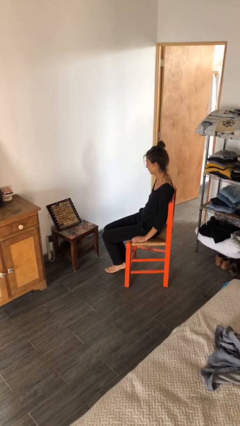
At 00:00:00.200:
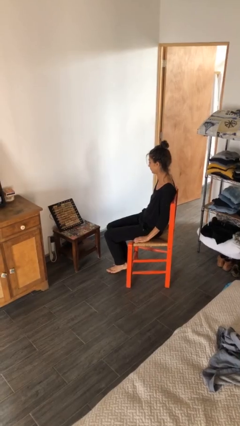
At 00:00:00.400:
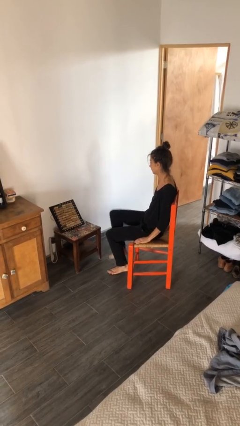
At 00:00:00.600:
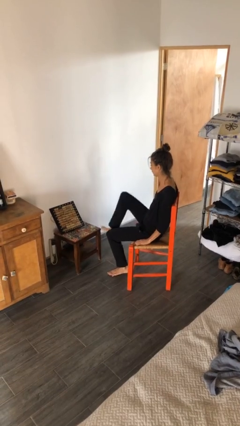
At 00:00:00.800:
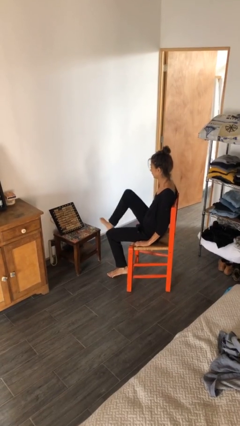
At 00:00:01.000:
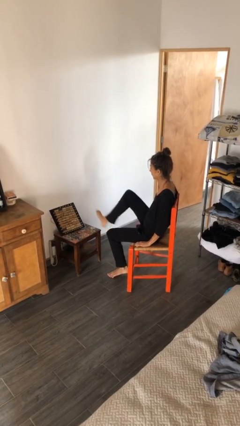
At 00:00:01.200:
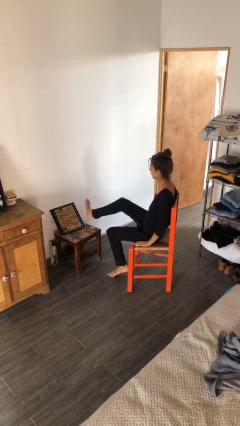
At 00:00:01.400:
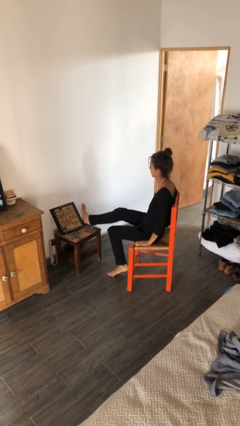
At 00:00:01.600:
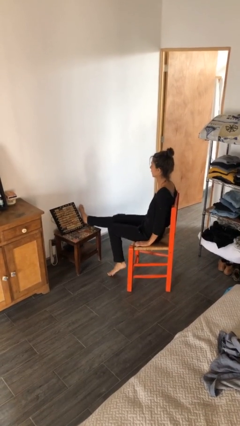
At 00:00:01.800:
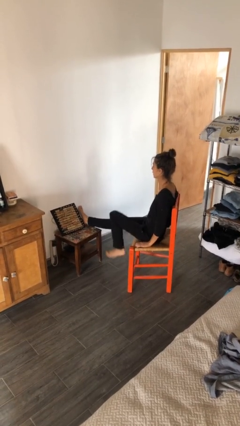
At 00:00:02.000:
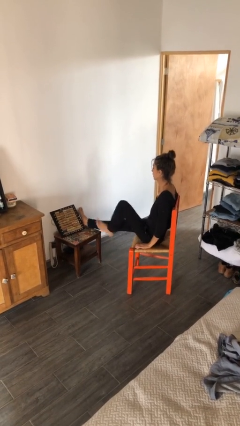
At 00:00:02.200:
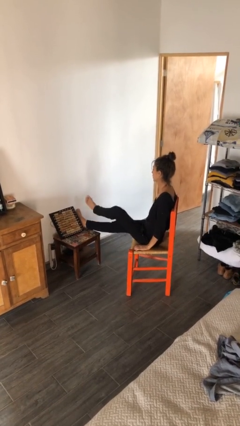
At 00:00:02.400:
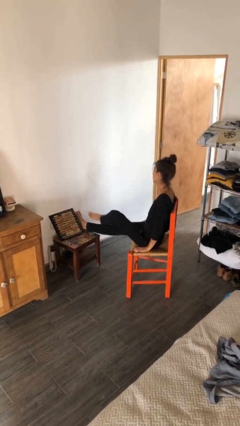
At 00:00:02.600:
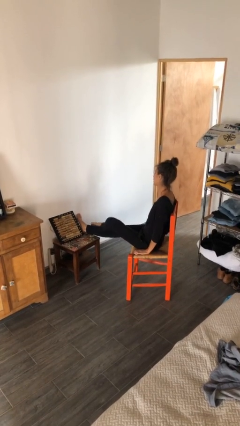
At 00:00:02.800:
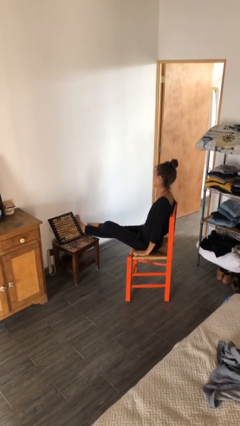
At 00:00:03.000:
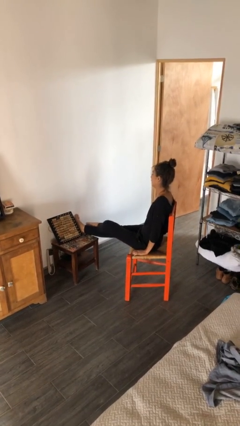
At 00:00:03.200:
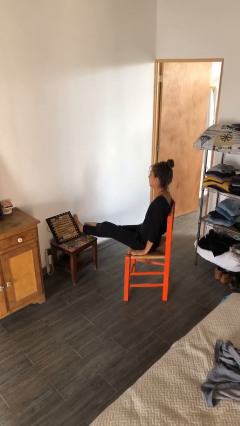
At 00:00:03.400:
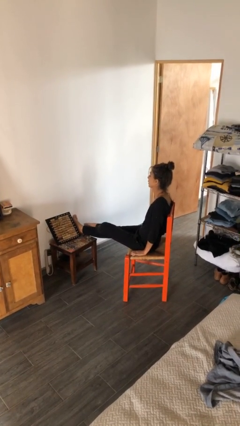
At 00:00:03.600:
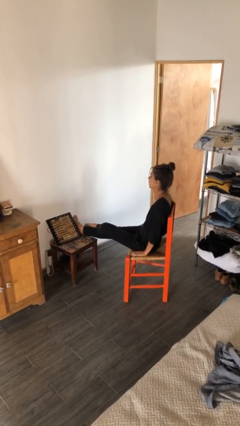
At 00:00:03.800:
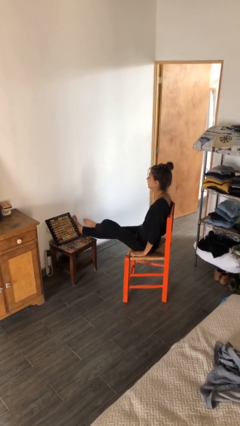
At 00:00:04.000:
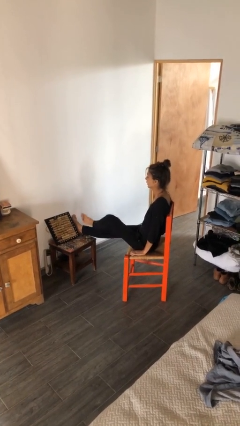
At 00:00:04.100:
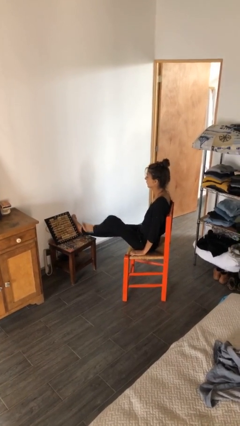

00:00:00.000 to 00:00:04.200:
person puts feet up

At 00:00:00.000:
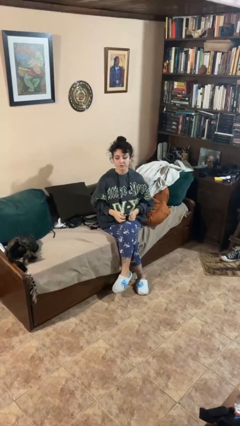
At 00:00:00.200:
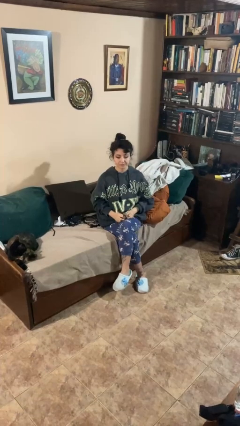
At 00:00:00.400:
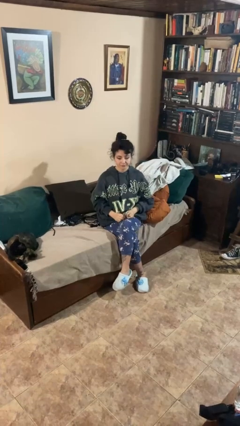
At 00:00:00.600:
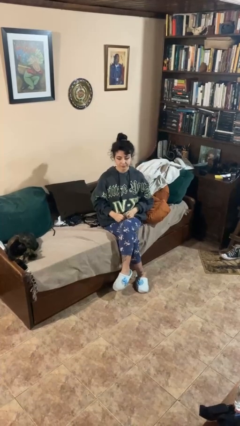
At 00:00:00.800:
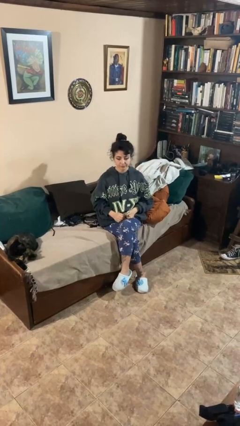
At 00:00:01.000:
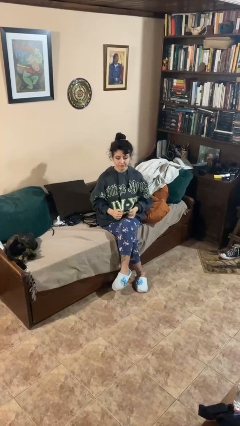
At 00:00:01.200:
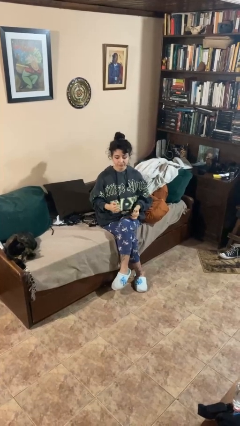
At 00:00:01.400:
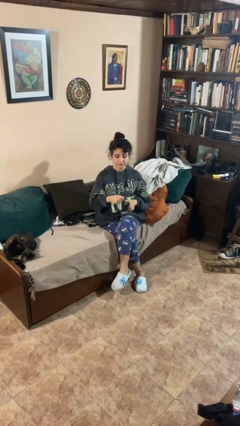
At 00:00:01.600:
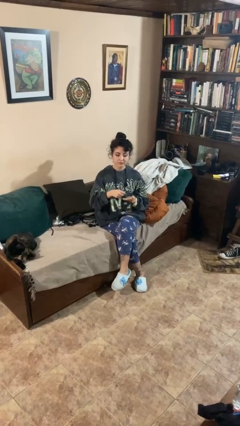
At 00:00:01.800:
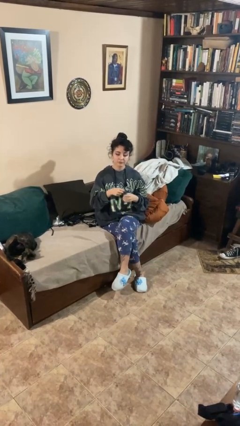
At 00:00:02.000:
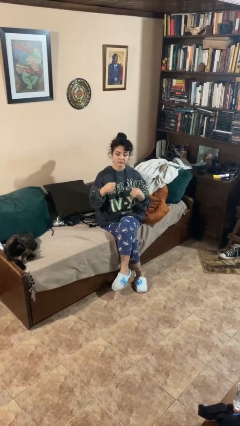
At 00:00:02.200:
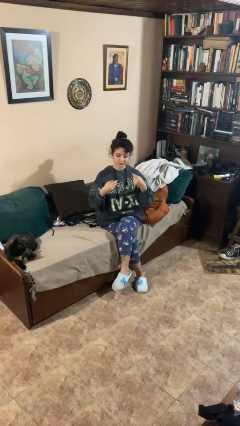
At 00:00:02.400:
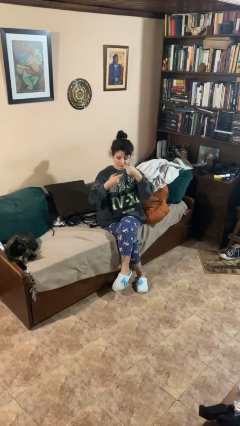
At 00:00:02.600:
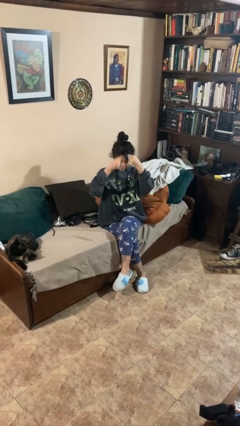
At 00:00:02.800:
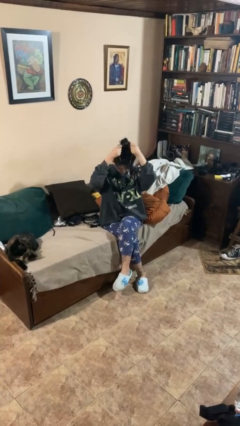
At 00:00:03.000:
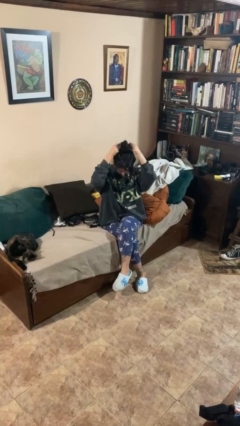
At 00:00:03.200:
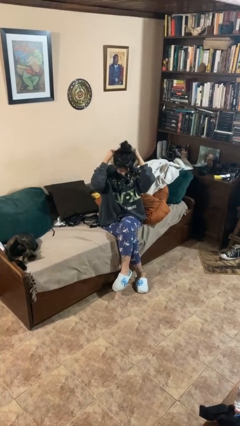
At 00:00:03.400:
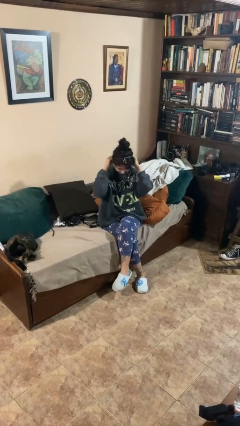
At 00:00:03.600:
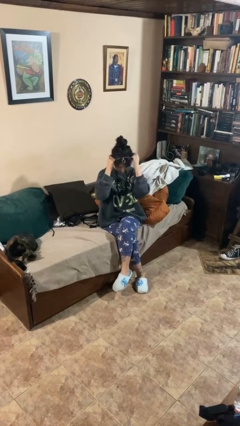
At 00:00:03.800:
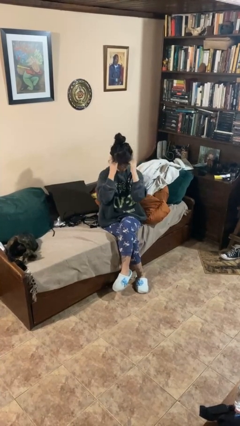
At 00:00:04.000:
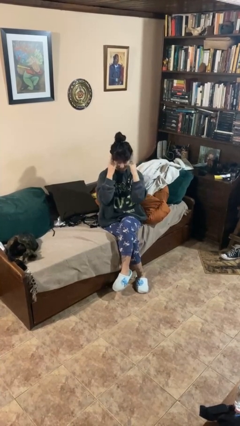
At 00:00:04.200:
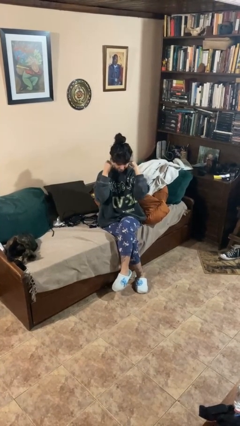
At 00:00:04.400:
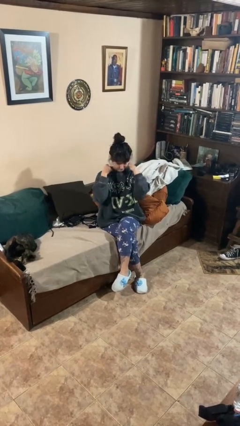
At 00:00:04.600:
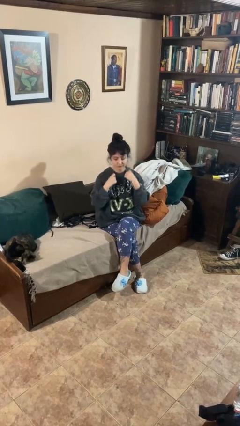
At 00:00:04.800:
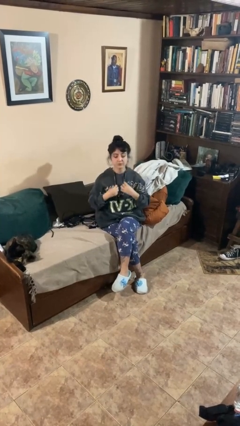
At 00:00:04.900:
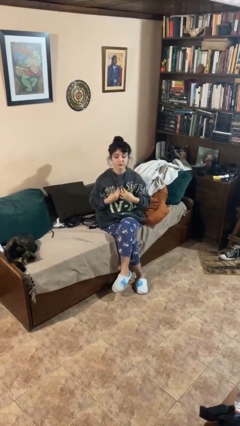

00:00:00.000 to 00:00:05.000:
person puts on necklace

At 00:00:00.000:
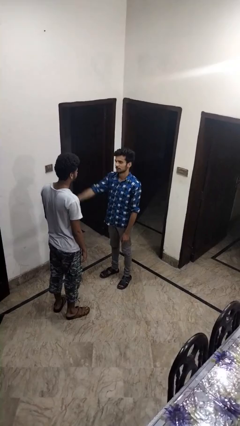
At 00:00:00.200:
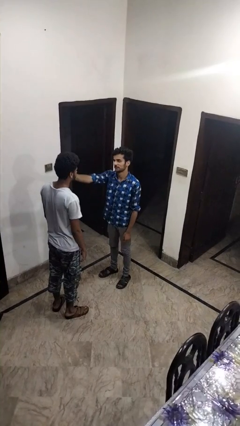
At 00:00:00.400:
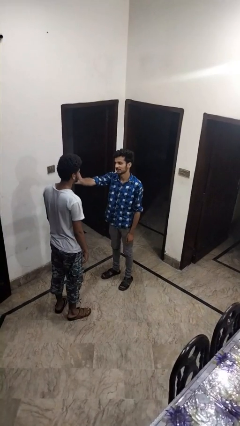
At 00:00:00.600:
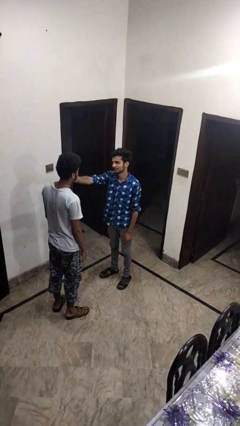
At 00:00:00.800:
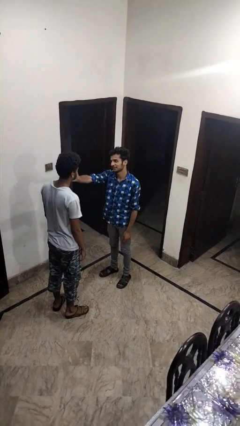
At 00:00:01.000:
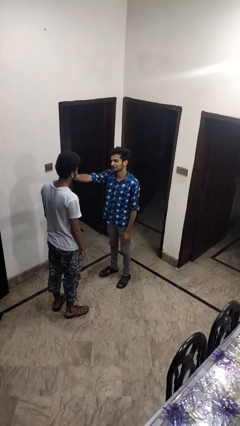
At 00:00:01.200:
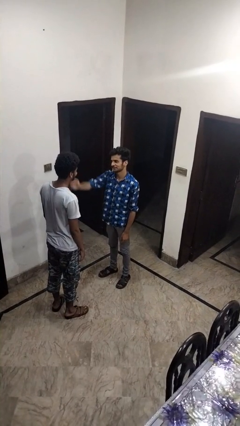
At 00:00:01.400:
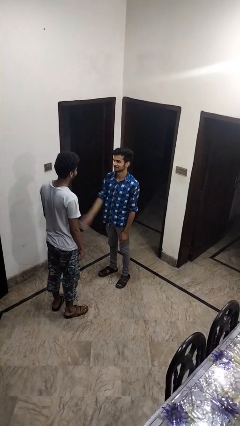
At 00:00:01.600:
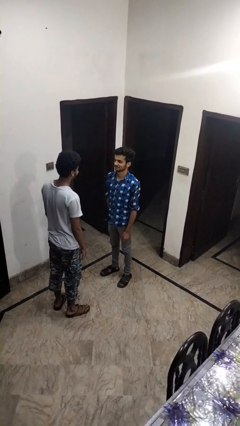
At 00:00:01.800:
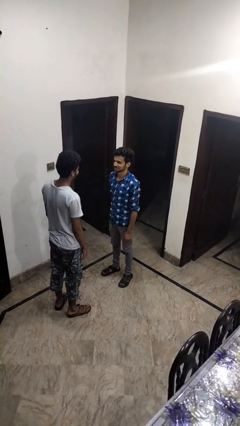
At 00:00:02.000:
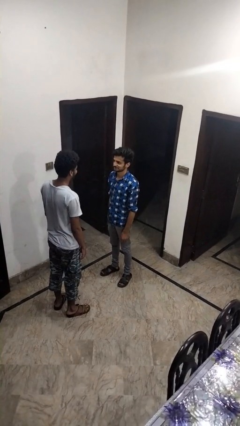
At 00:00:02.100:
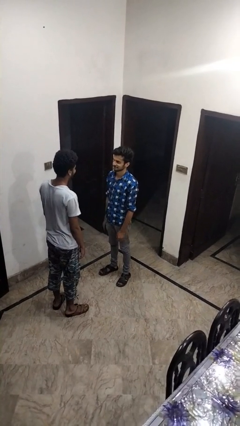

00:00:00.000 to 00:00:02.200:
person touches face of person

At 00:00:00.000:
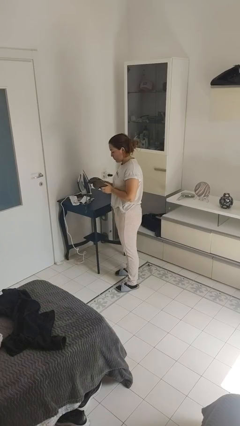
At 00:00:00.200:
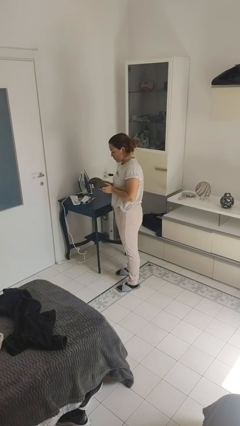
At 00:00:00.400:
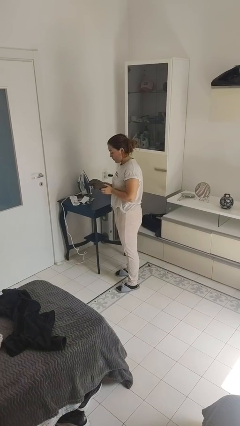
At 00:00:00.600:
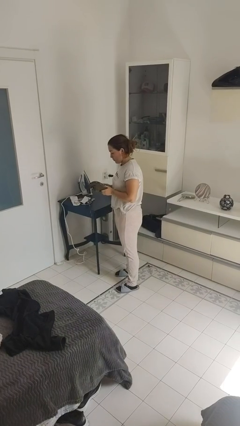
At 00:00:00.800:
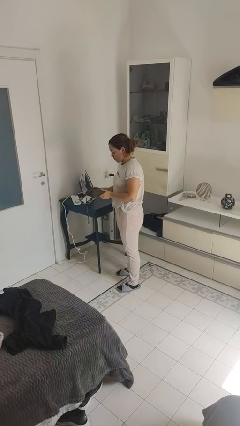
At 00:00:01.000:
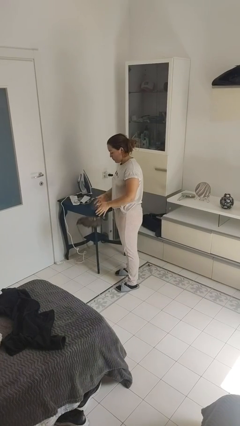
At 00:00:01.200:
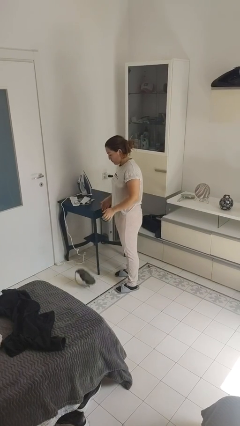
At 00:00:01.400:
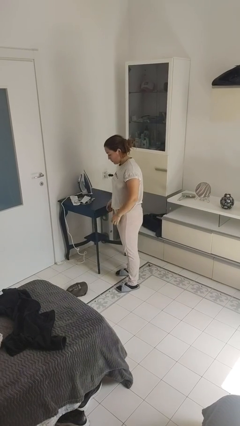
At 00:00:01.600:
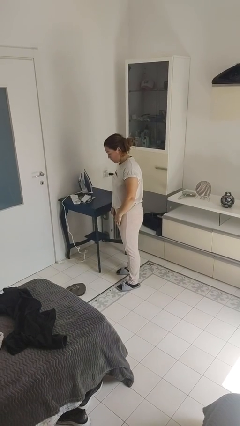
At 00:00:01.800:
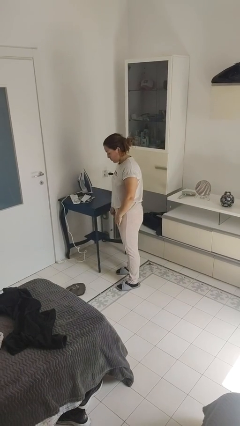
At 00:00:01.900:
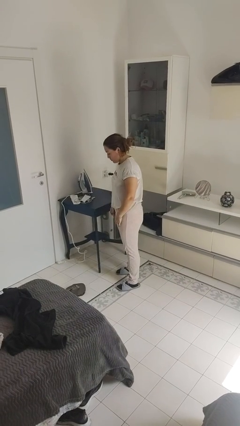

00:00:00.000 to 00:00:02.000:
person drops object

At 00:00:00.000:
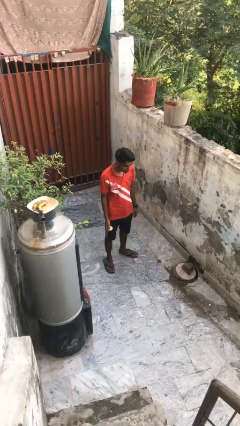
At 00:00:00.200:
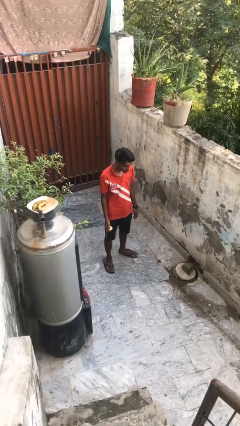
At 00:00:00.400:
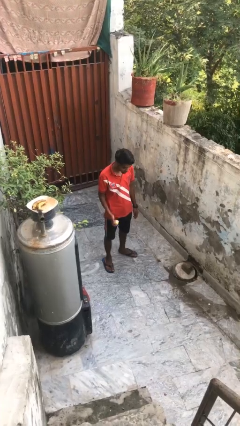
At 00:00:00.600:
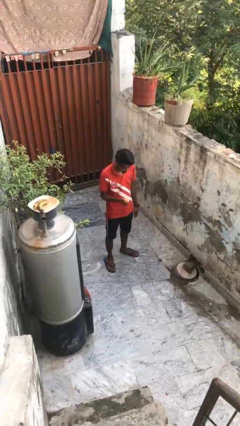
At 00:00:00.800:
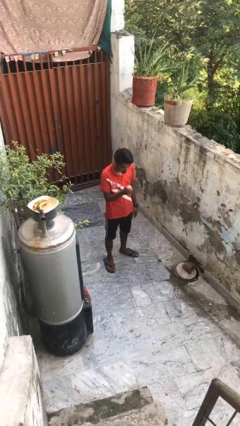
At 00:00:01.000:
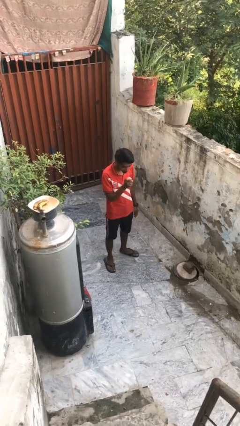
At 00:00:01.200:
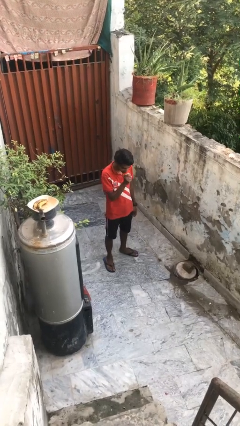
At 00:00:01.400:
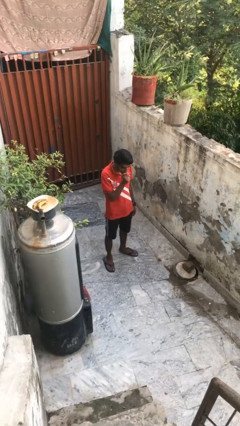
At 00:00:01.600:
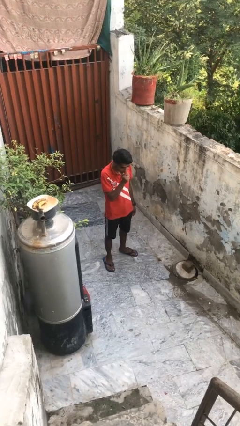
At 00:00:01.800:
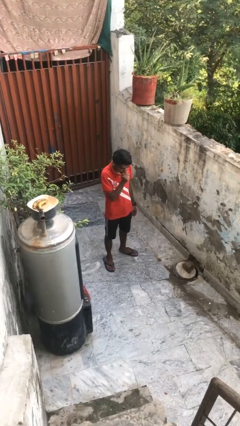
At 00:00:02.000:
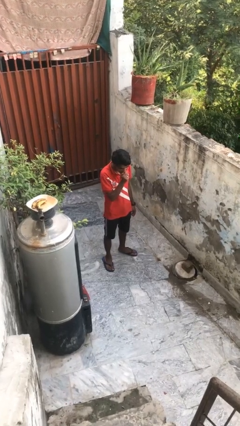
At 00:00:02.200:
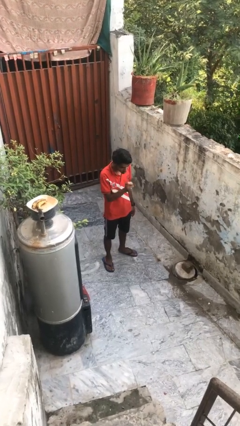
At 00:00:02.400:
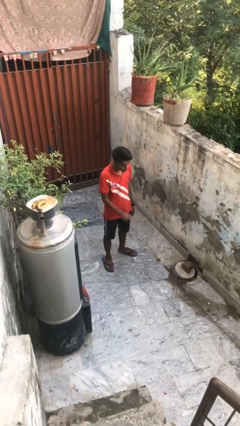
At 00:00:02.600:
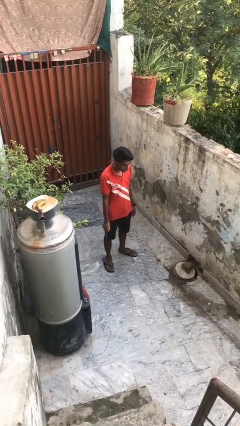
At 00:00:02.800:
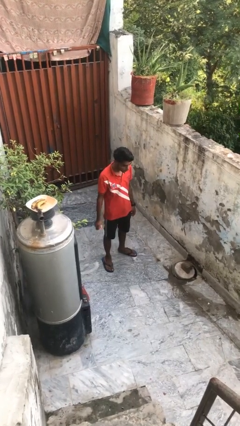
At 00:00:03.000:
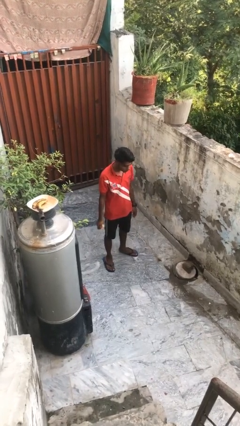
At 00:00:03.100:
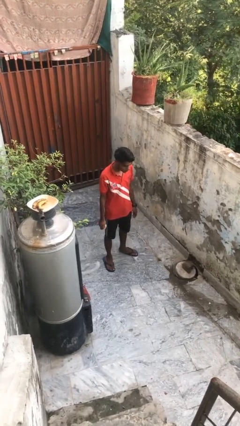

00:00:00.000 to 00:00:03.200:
person eats apple

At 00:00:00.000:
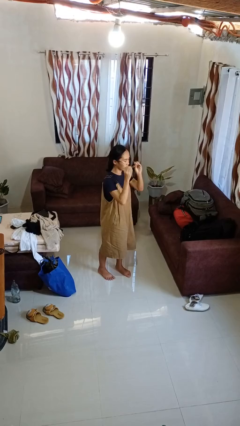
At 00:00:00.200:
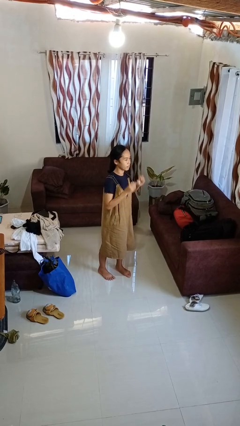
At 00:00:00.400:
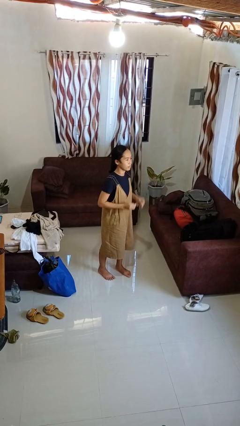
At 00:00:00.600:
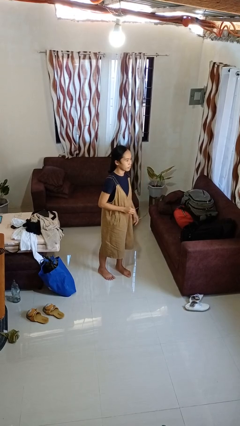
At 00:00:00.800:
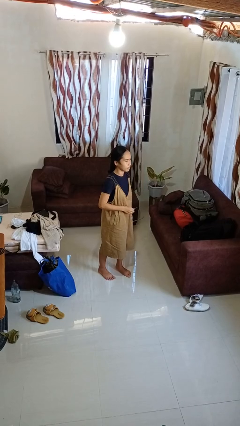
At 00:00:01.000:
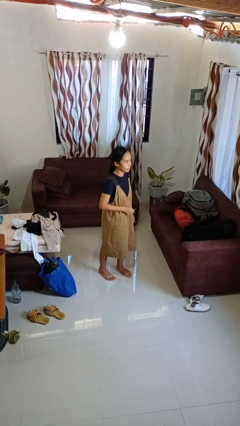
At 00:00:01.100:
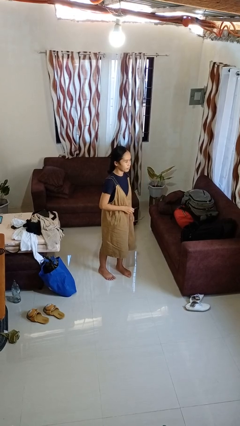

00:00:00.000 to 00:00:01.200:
person takes off glasses
